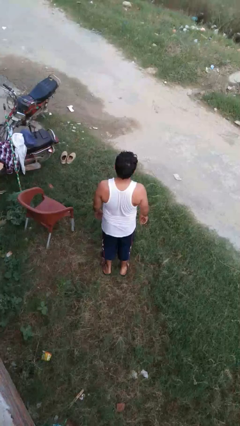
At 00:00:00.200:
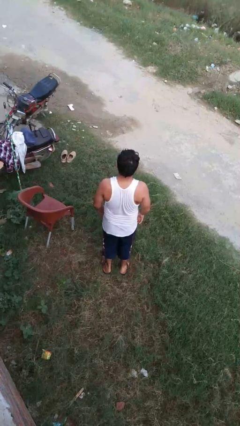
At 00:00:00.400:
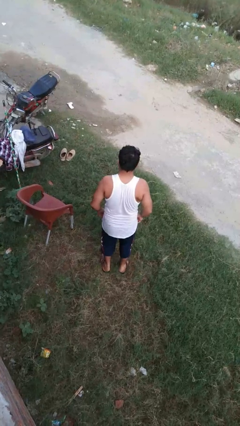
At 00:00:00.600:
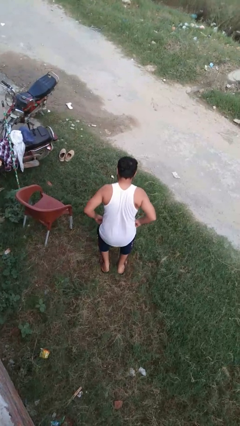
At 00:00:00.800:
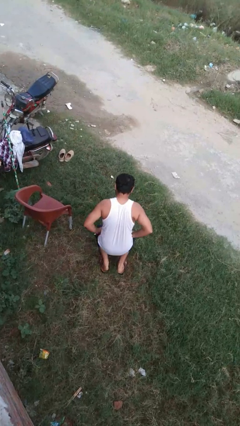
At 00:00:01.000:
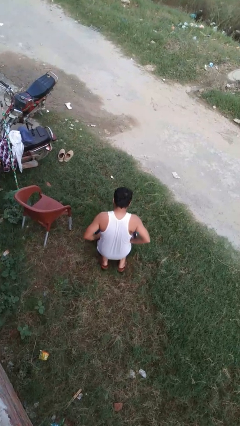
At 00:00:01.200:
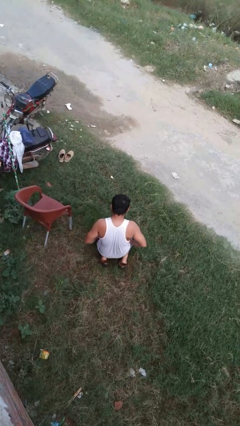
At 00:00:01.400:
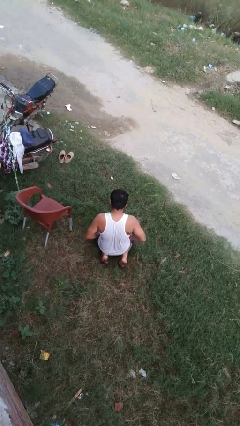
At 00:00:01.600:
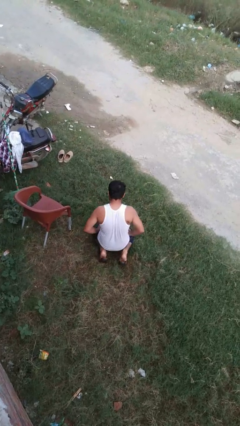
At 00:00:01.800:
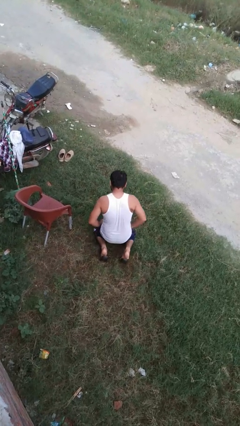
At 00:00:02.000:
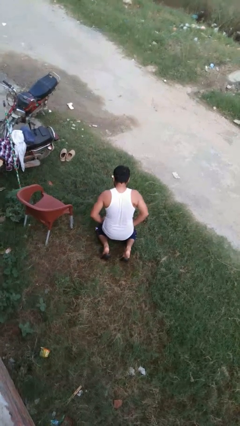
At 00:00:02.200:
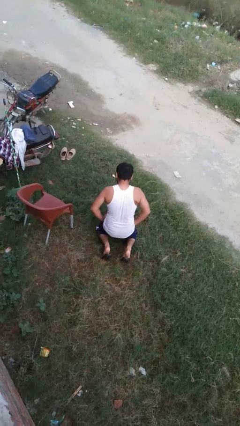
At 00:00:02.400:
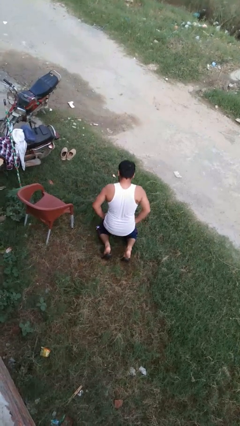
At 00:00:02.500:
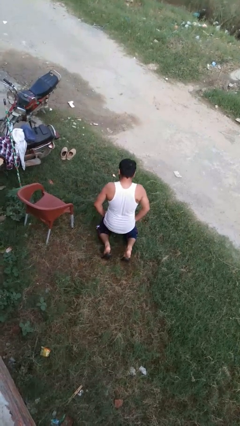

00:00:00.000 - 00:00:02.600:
person kneels

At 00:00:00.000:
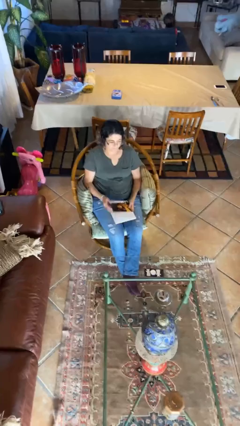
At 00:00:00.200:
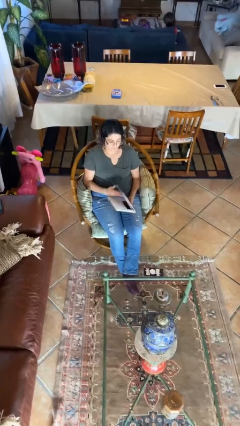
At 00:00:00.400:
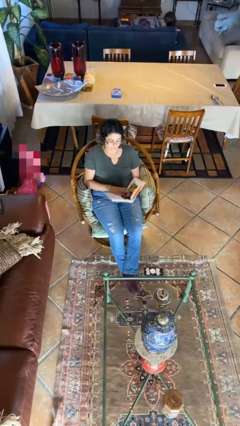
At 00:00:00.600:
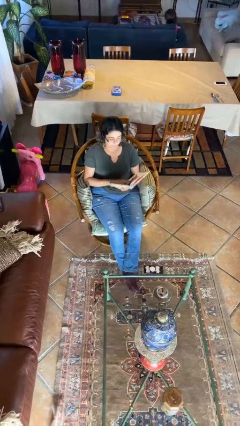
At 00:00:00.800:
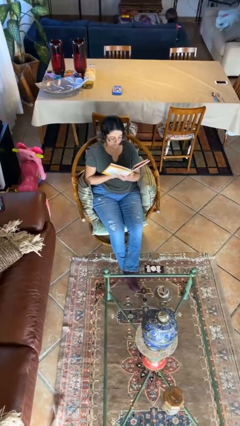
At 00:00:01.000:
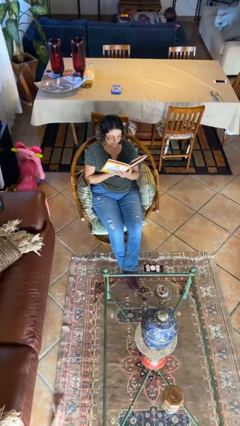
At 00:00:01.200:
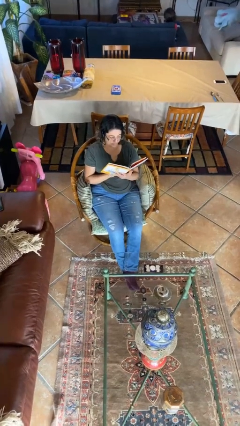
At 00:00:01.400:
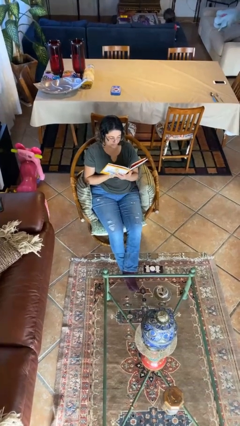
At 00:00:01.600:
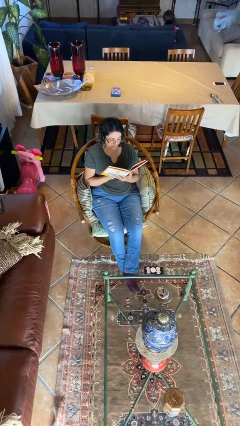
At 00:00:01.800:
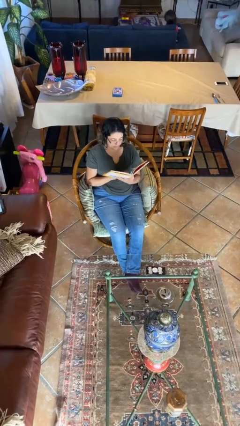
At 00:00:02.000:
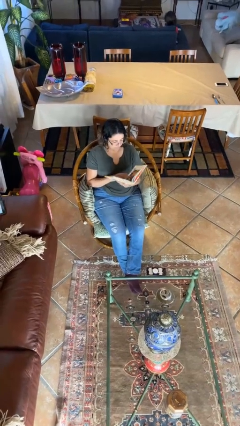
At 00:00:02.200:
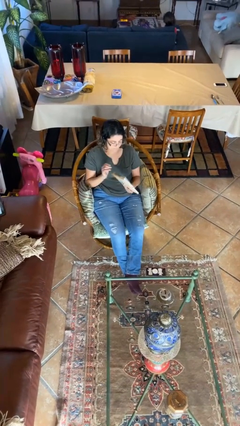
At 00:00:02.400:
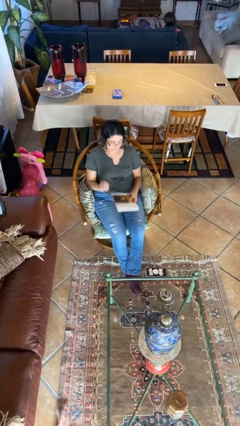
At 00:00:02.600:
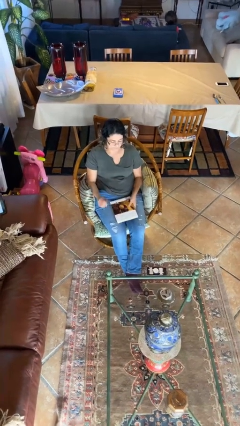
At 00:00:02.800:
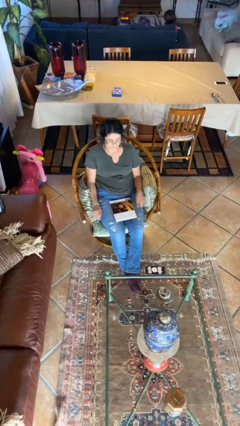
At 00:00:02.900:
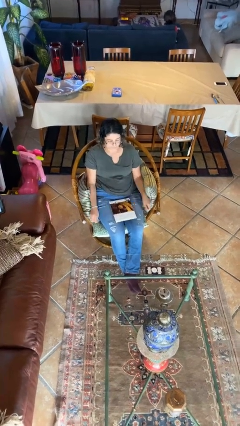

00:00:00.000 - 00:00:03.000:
person reads document

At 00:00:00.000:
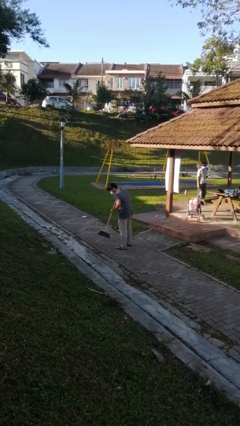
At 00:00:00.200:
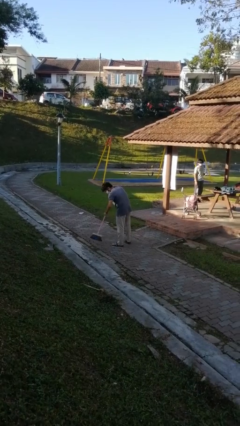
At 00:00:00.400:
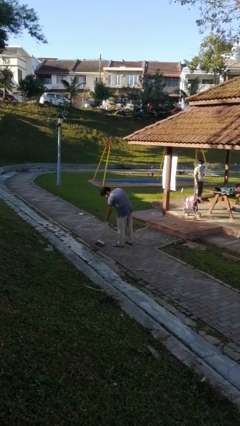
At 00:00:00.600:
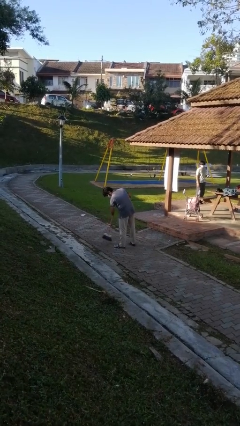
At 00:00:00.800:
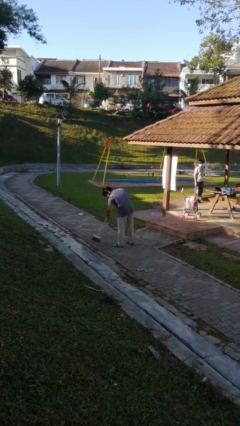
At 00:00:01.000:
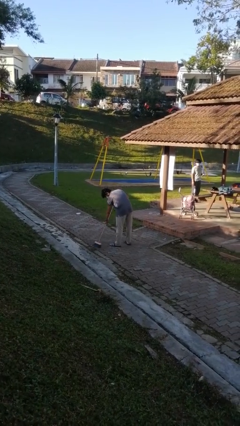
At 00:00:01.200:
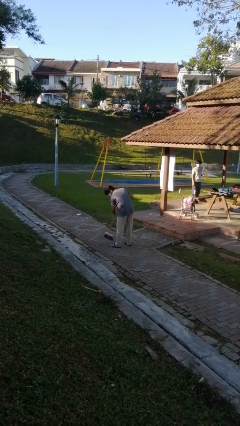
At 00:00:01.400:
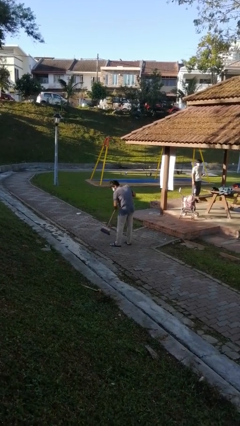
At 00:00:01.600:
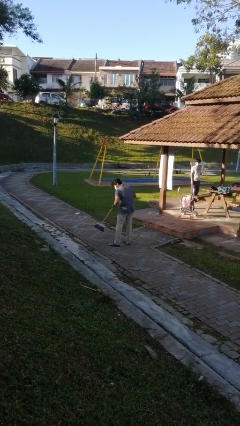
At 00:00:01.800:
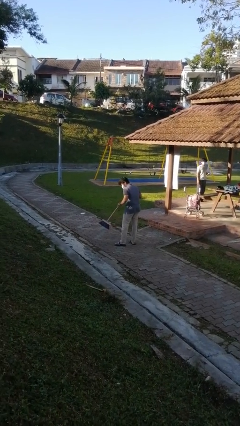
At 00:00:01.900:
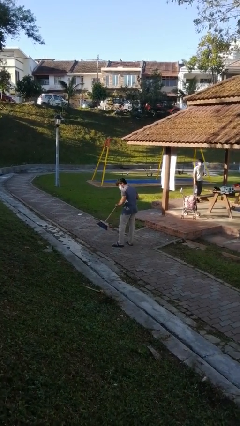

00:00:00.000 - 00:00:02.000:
person sweeps floor

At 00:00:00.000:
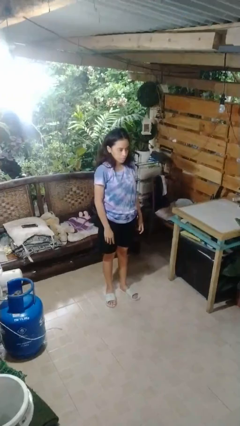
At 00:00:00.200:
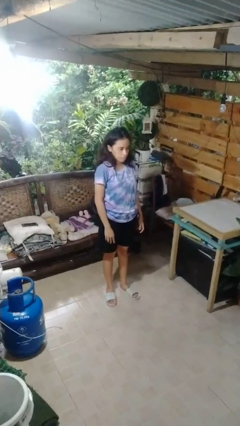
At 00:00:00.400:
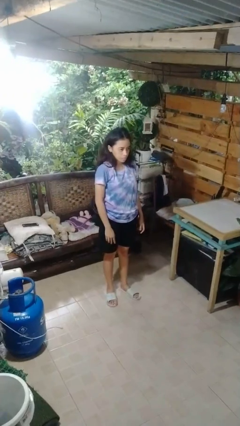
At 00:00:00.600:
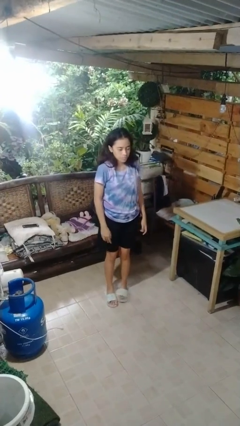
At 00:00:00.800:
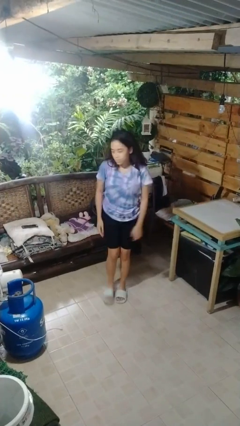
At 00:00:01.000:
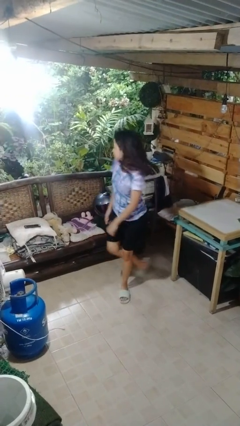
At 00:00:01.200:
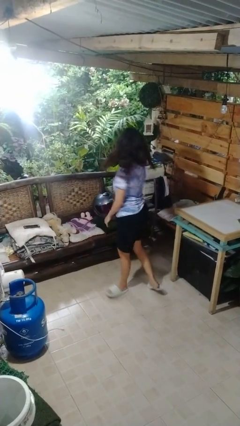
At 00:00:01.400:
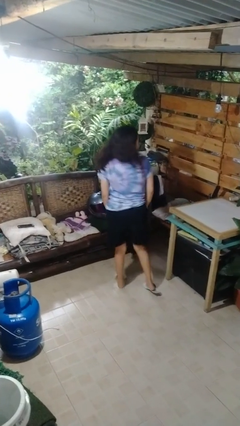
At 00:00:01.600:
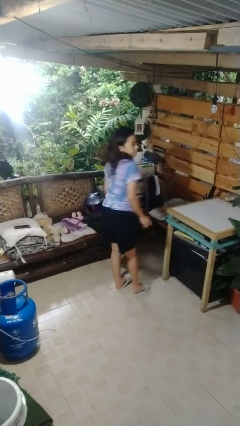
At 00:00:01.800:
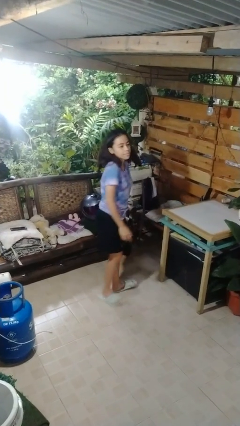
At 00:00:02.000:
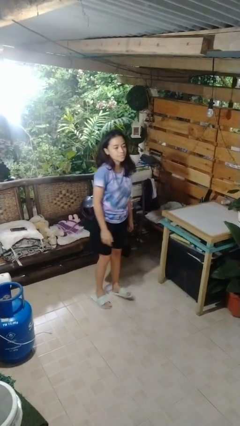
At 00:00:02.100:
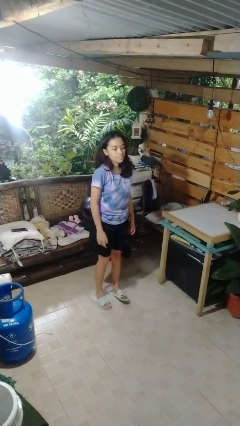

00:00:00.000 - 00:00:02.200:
person twirls

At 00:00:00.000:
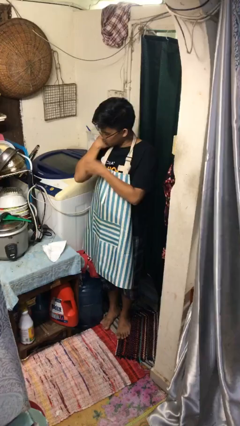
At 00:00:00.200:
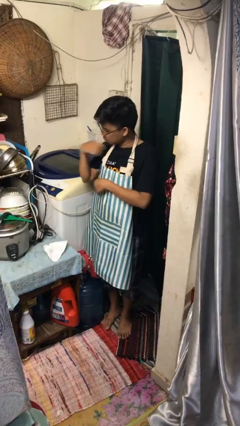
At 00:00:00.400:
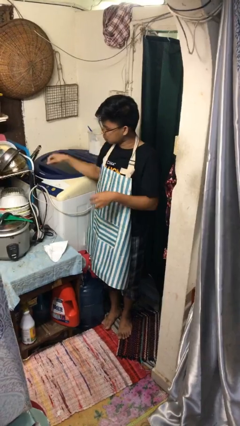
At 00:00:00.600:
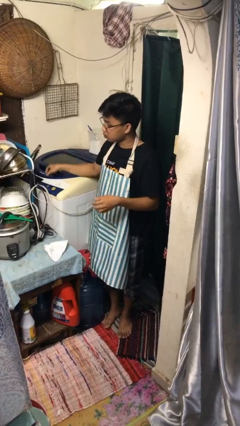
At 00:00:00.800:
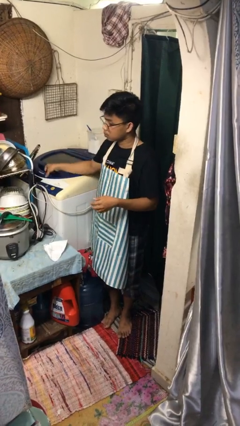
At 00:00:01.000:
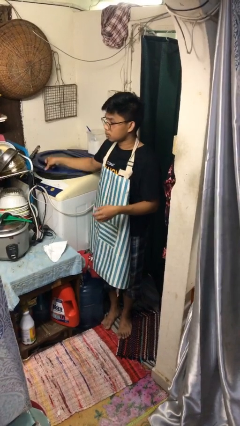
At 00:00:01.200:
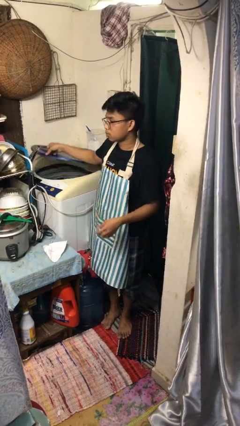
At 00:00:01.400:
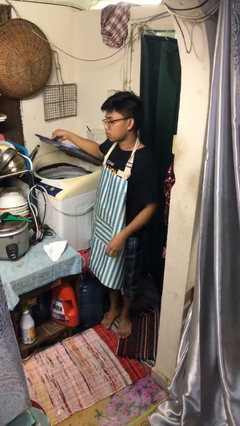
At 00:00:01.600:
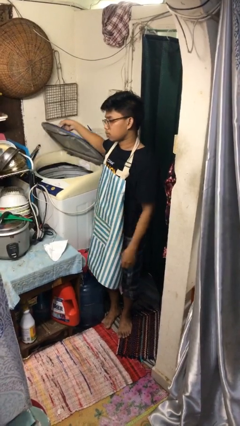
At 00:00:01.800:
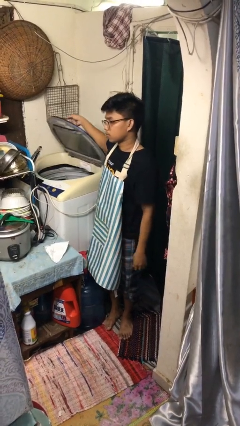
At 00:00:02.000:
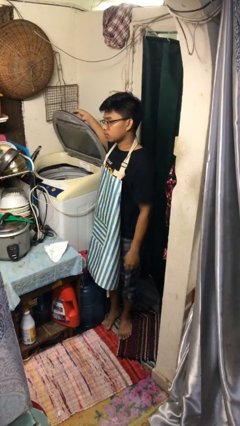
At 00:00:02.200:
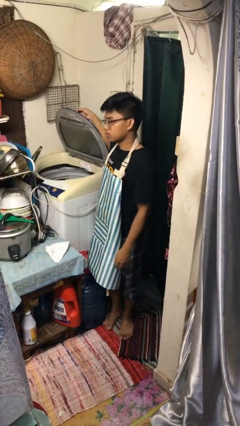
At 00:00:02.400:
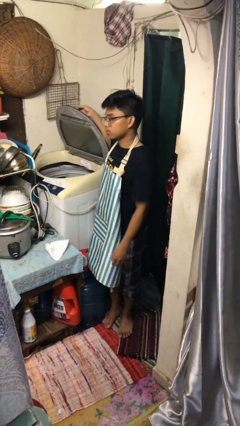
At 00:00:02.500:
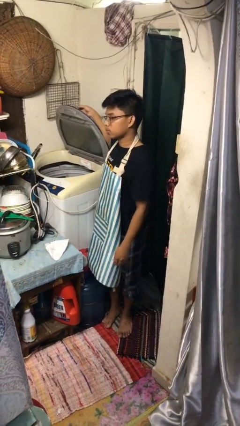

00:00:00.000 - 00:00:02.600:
person opens clothes washer

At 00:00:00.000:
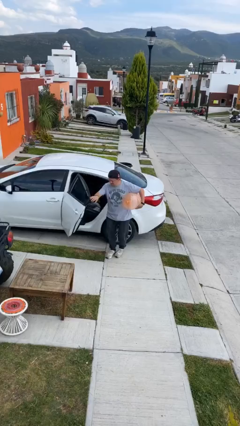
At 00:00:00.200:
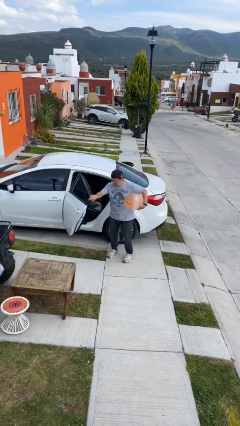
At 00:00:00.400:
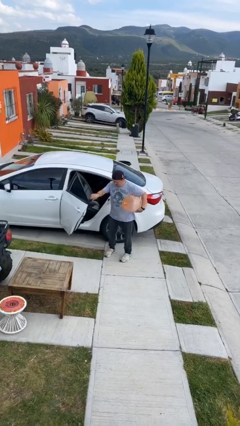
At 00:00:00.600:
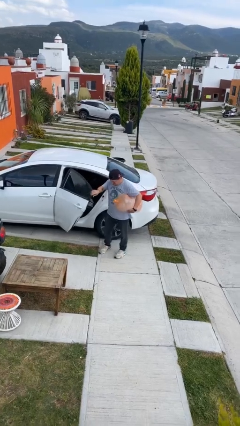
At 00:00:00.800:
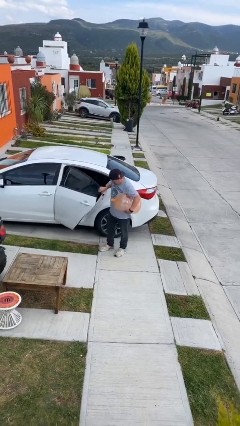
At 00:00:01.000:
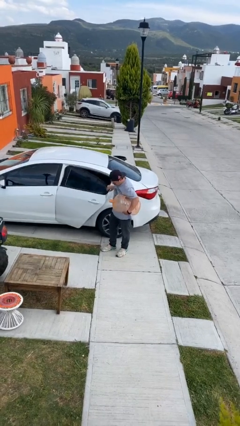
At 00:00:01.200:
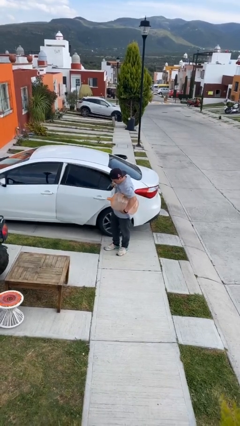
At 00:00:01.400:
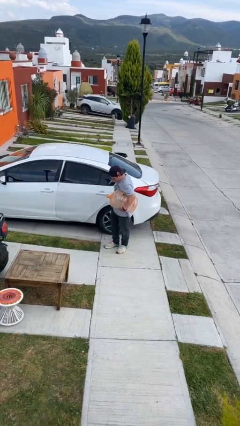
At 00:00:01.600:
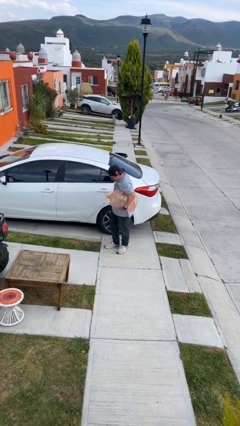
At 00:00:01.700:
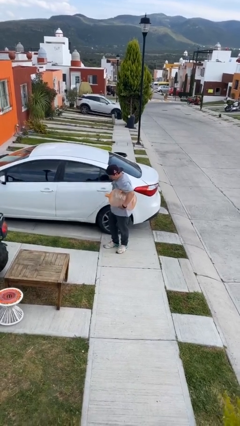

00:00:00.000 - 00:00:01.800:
person closes car door

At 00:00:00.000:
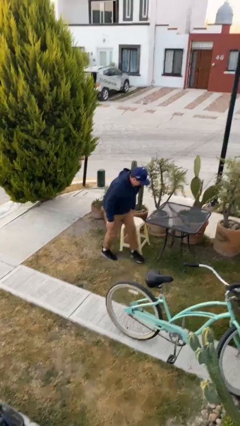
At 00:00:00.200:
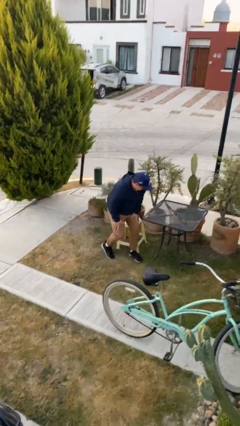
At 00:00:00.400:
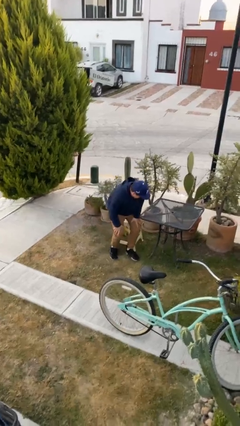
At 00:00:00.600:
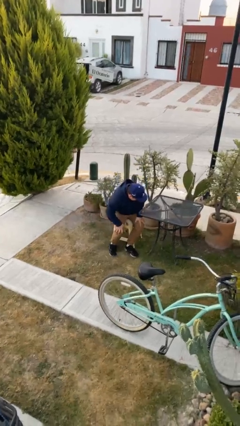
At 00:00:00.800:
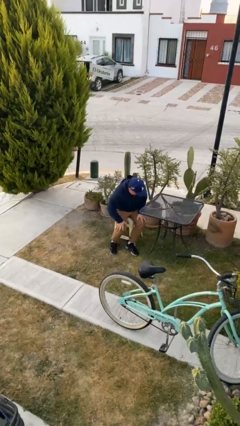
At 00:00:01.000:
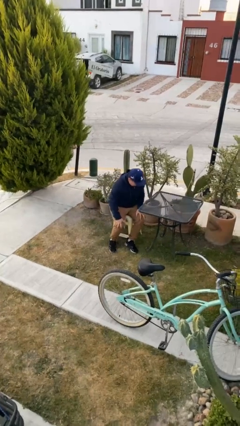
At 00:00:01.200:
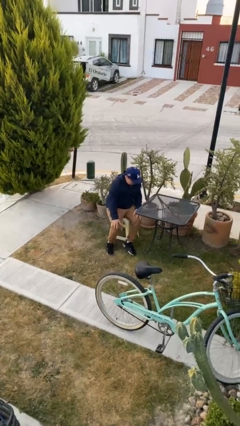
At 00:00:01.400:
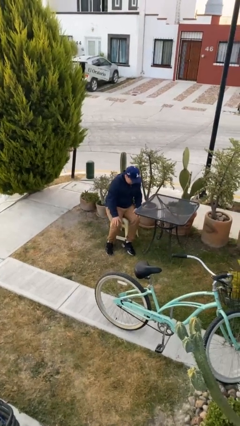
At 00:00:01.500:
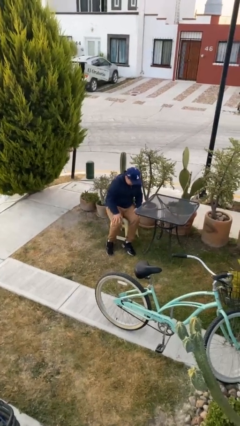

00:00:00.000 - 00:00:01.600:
person sits down

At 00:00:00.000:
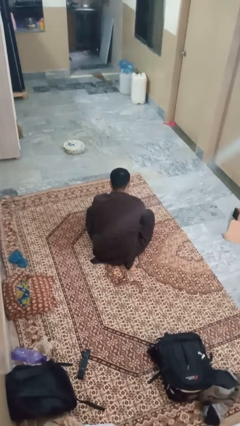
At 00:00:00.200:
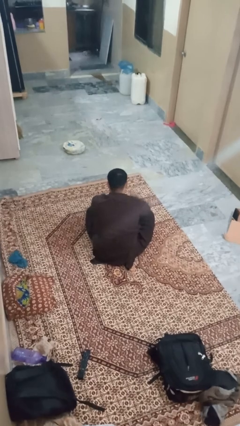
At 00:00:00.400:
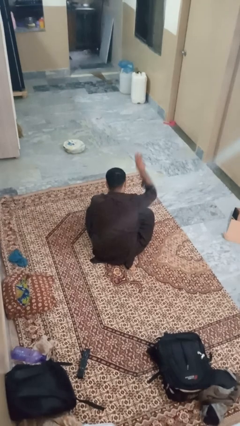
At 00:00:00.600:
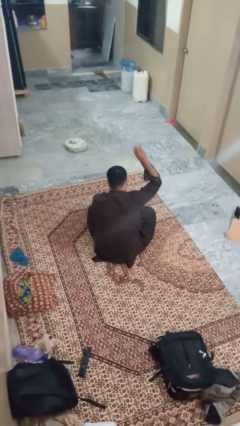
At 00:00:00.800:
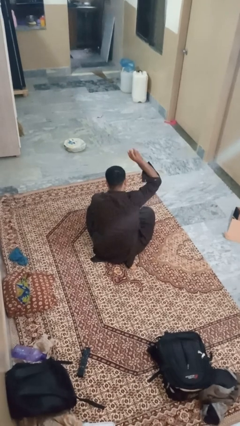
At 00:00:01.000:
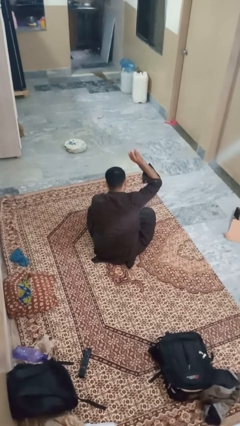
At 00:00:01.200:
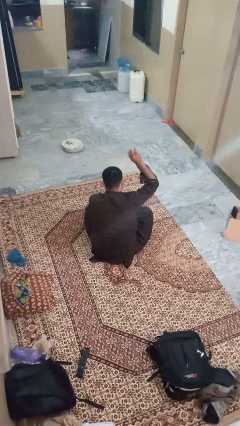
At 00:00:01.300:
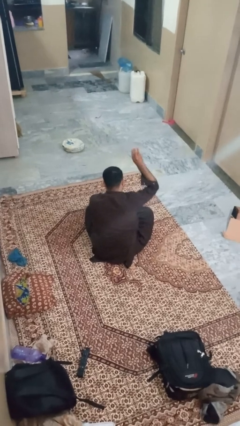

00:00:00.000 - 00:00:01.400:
person gestures number three
